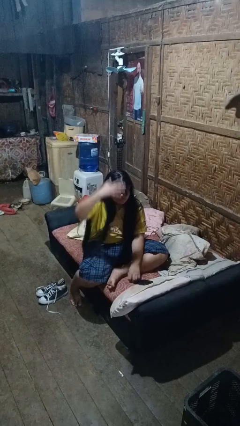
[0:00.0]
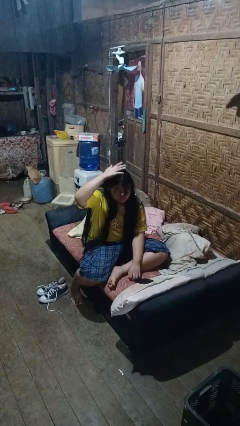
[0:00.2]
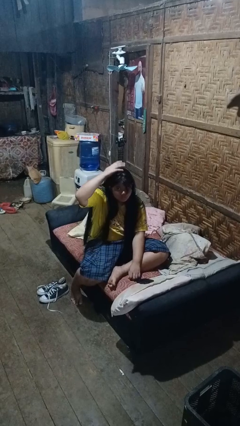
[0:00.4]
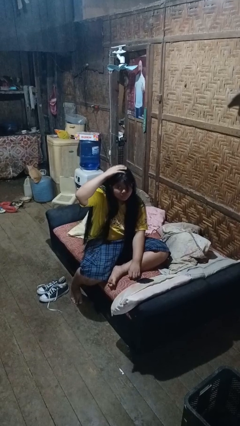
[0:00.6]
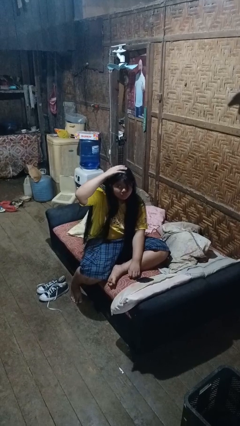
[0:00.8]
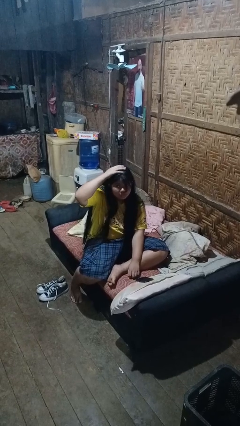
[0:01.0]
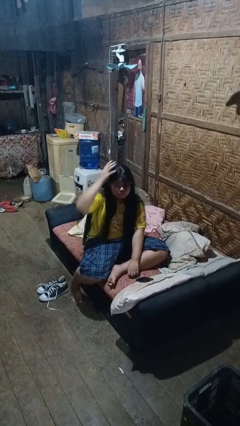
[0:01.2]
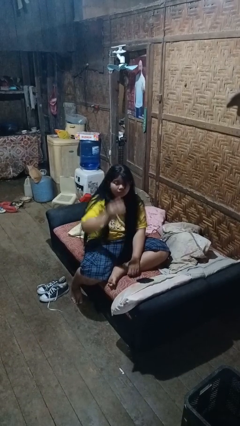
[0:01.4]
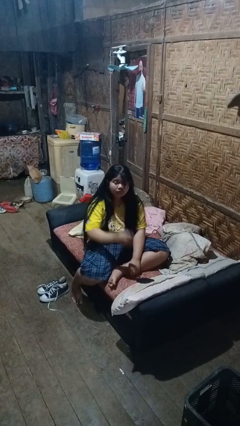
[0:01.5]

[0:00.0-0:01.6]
person pats head

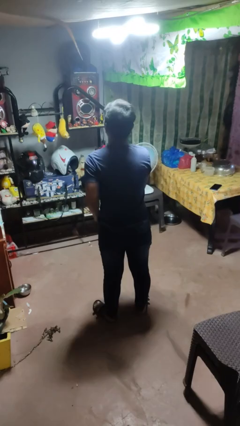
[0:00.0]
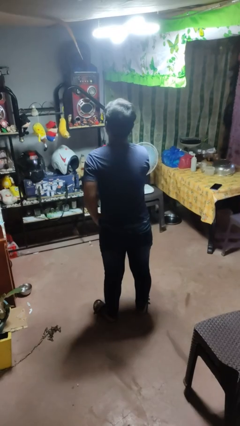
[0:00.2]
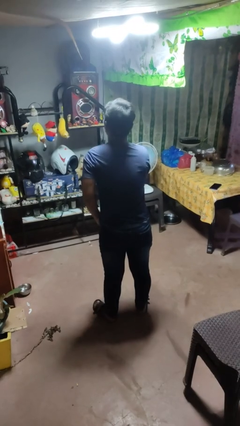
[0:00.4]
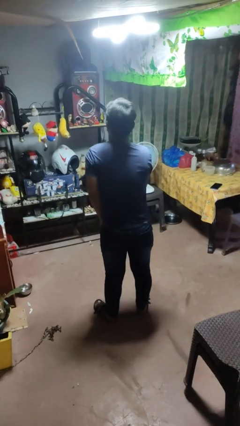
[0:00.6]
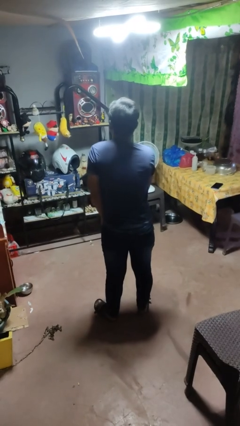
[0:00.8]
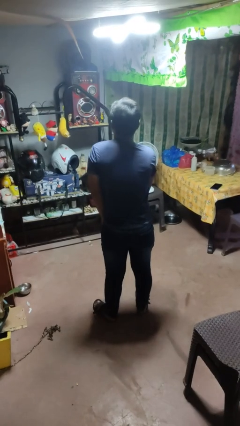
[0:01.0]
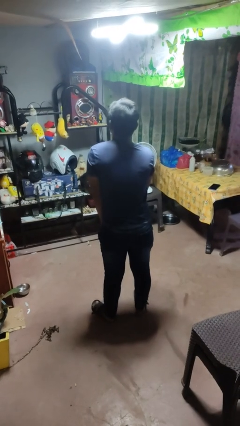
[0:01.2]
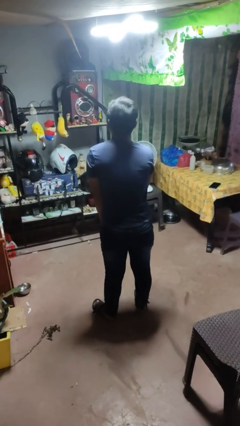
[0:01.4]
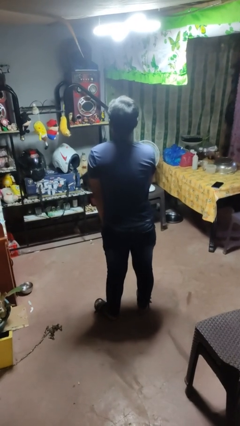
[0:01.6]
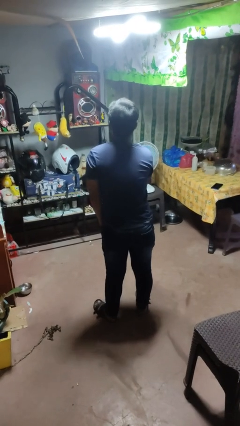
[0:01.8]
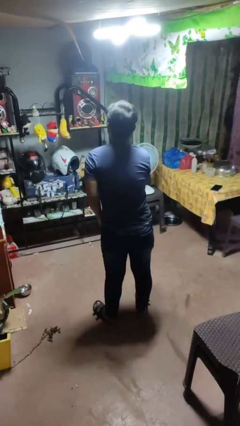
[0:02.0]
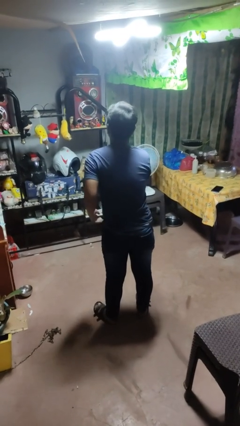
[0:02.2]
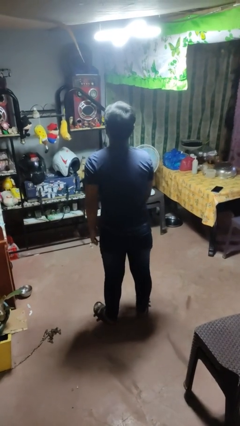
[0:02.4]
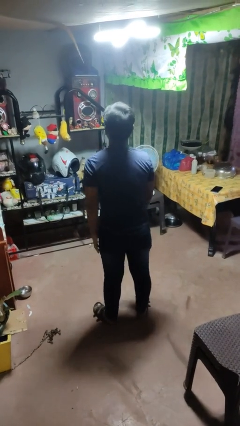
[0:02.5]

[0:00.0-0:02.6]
person puts hands in back pockets

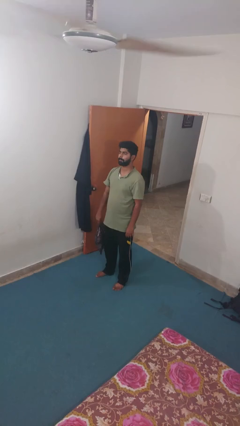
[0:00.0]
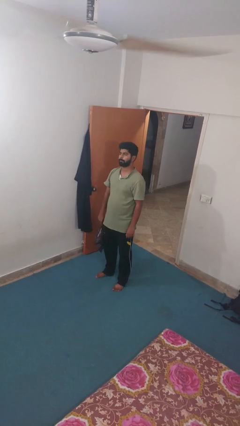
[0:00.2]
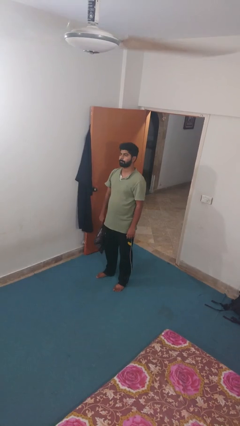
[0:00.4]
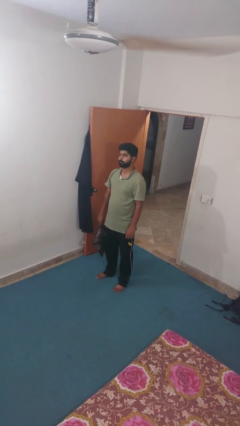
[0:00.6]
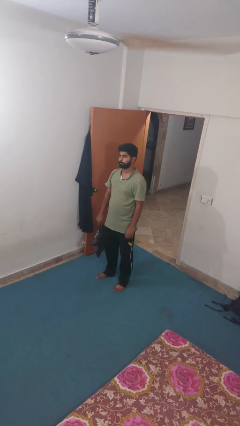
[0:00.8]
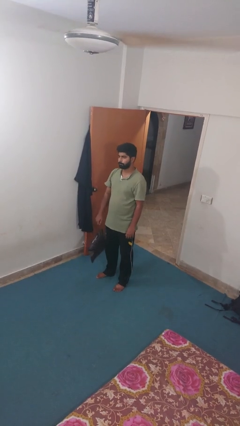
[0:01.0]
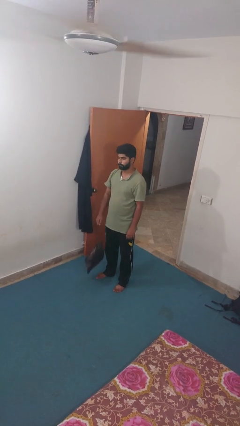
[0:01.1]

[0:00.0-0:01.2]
person drops object

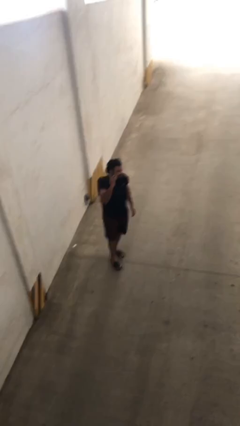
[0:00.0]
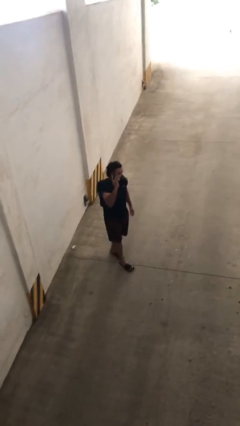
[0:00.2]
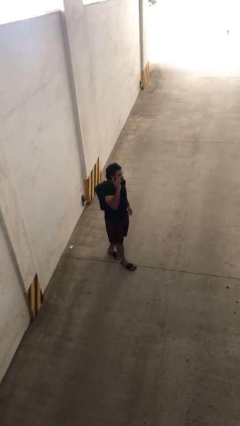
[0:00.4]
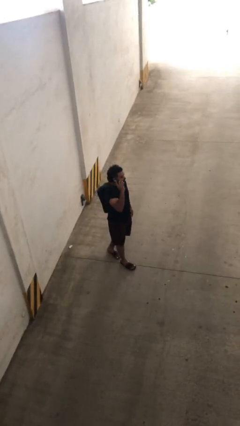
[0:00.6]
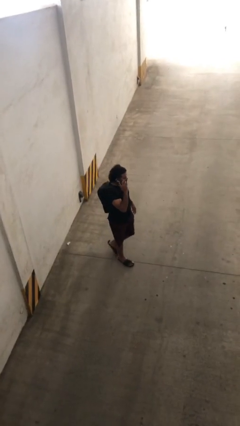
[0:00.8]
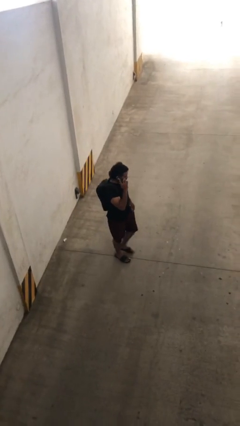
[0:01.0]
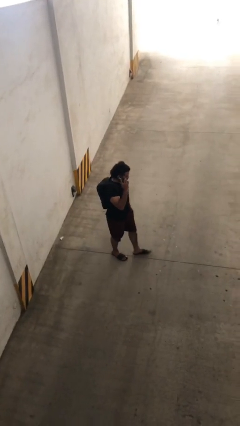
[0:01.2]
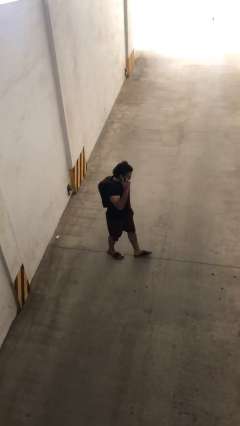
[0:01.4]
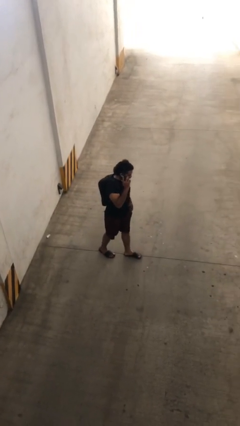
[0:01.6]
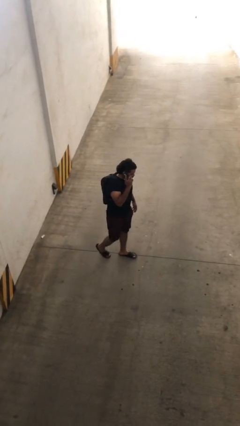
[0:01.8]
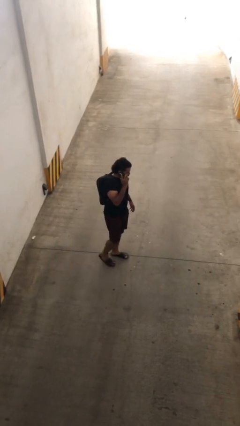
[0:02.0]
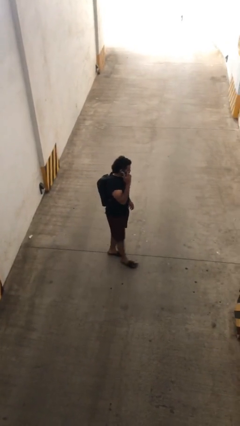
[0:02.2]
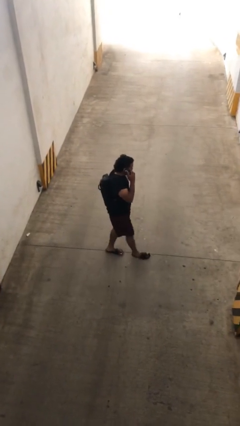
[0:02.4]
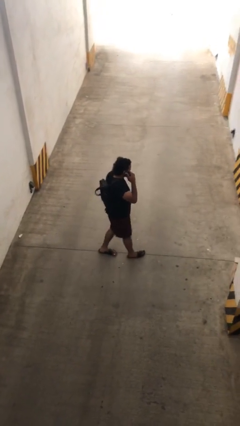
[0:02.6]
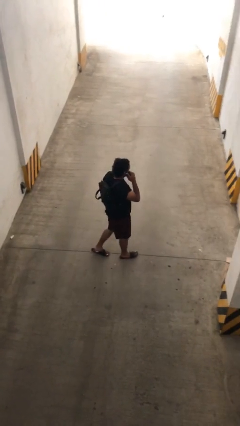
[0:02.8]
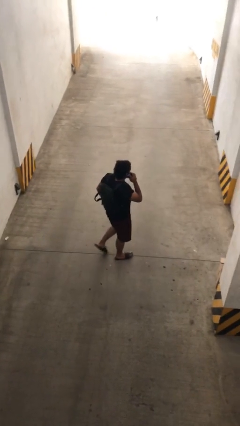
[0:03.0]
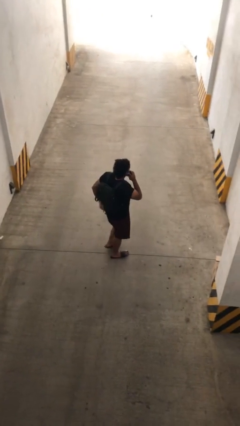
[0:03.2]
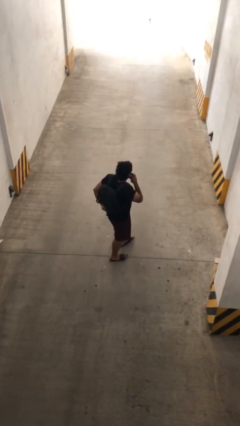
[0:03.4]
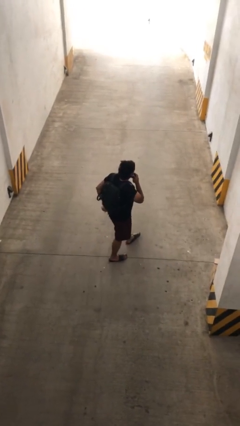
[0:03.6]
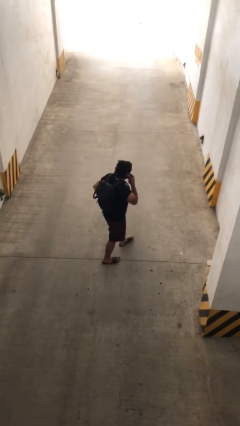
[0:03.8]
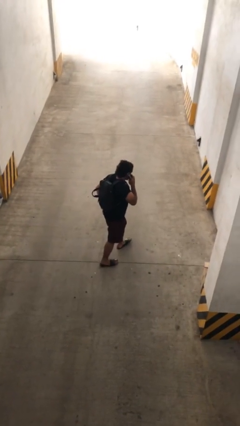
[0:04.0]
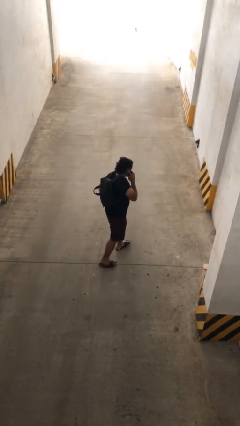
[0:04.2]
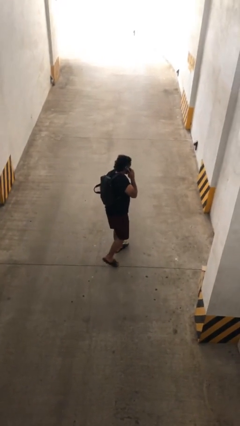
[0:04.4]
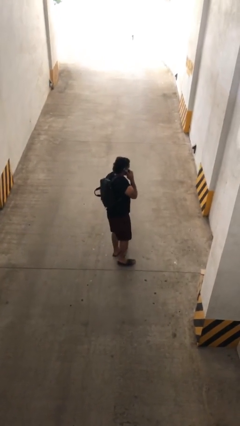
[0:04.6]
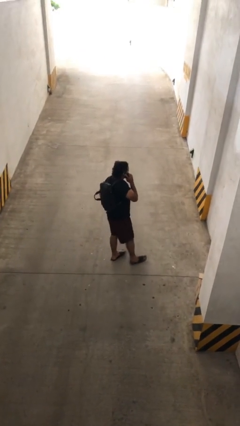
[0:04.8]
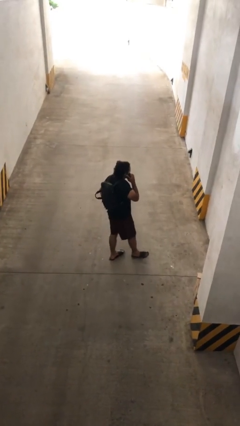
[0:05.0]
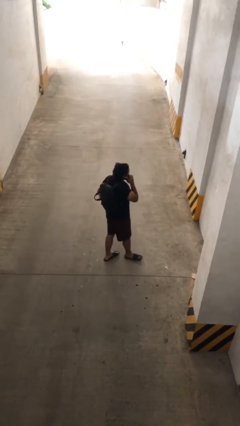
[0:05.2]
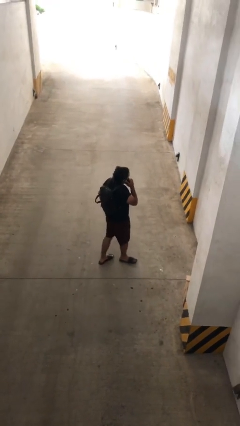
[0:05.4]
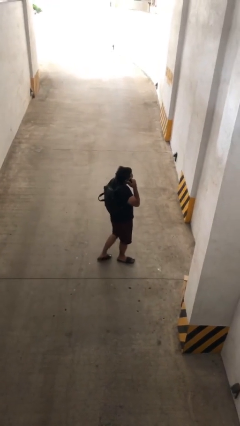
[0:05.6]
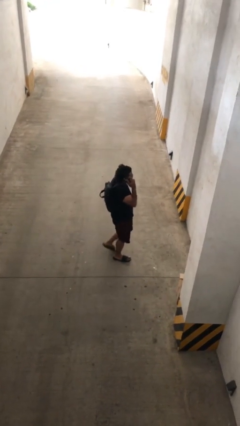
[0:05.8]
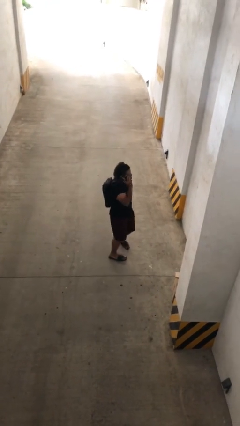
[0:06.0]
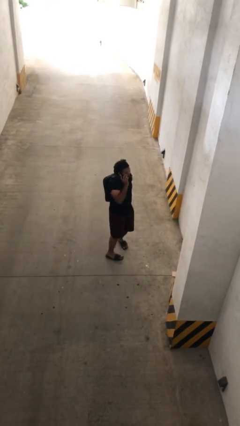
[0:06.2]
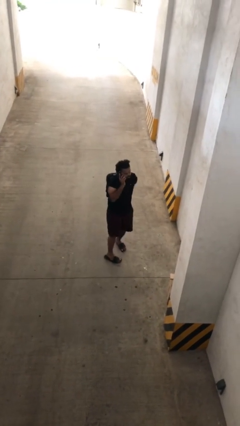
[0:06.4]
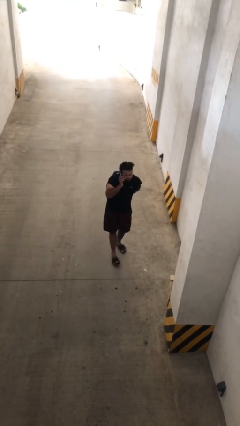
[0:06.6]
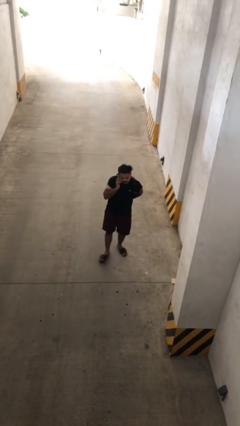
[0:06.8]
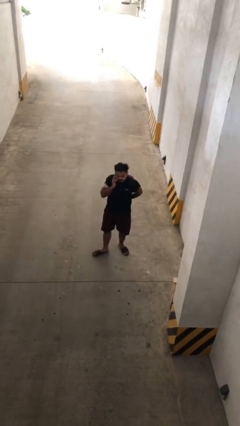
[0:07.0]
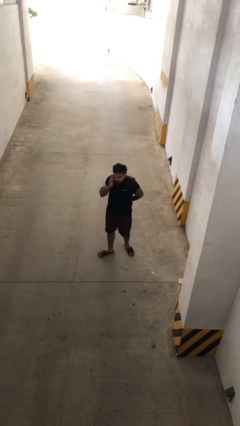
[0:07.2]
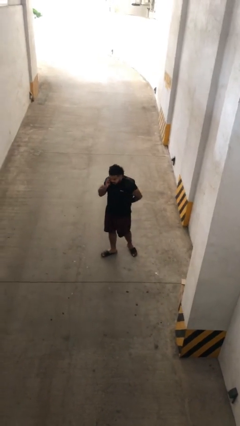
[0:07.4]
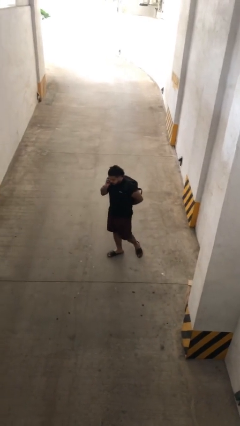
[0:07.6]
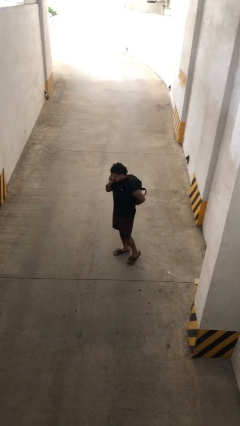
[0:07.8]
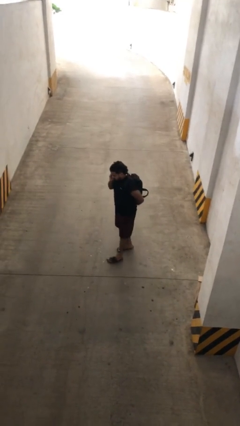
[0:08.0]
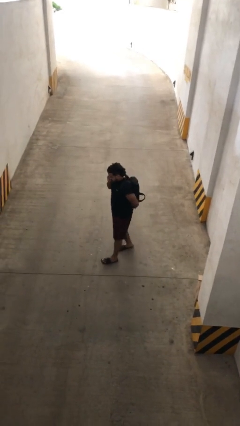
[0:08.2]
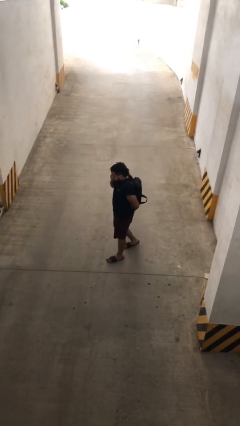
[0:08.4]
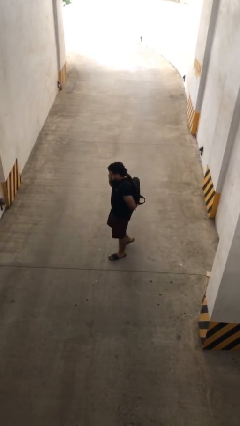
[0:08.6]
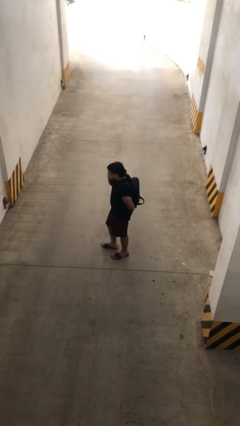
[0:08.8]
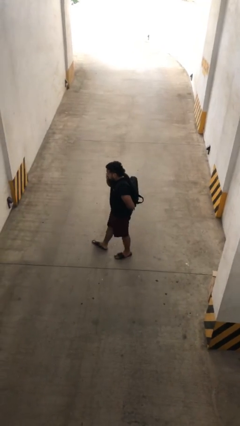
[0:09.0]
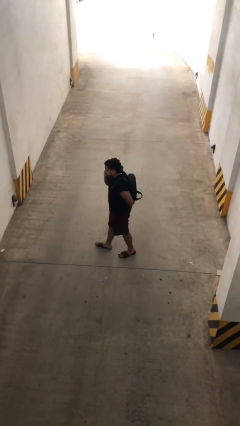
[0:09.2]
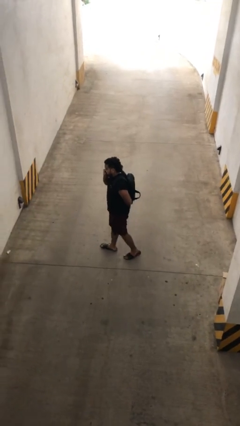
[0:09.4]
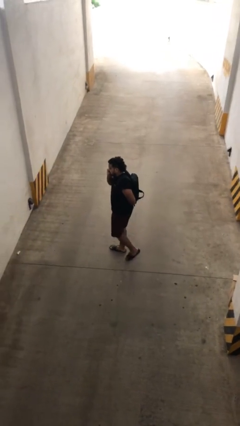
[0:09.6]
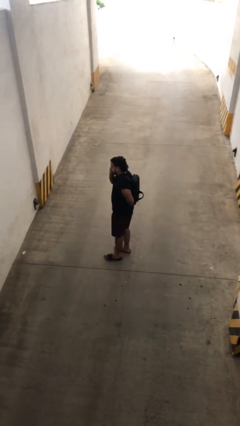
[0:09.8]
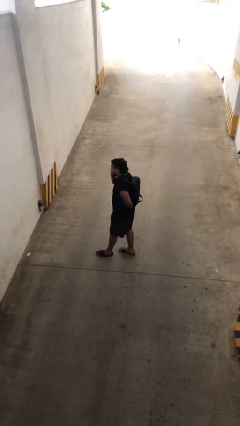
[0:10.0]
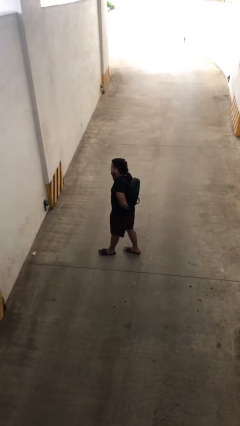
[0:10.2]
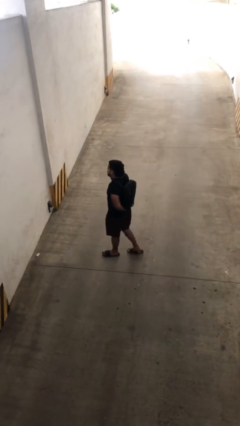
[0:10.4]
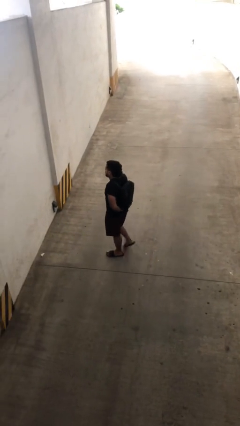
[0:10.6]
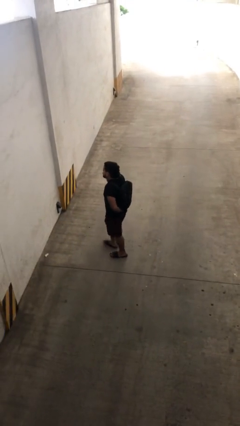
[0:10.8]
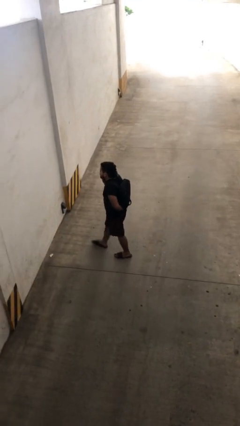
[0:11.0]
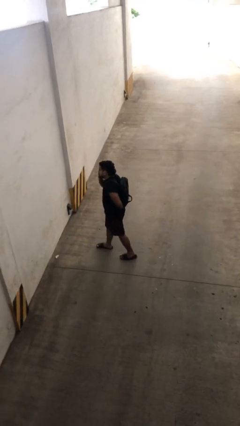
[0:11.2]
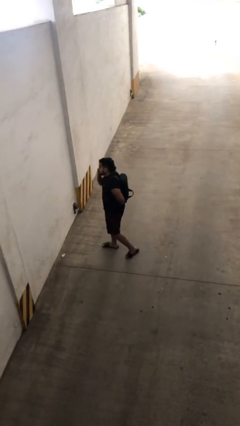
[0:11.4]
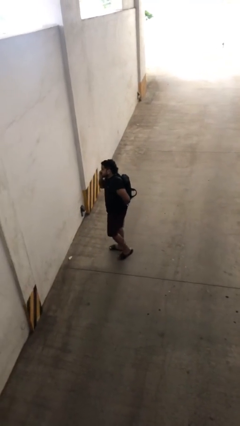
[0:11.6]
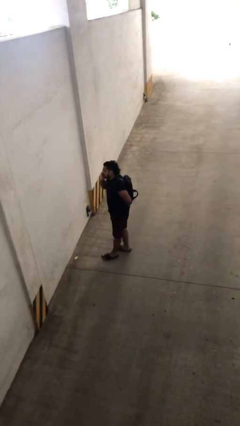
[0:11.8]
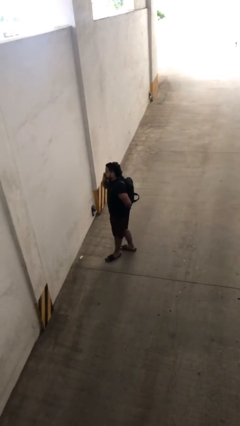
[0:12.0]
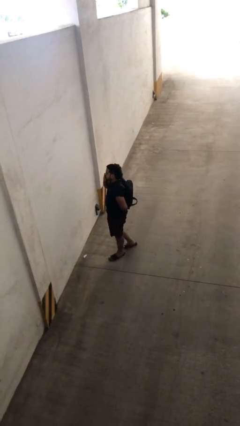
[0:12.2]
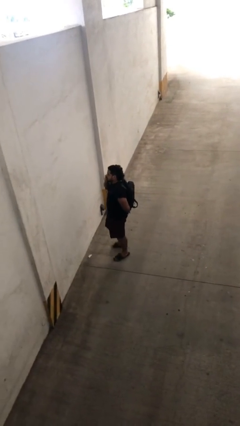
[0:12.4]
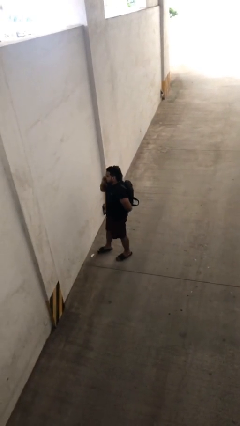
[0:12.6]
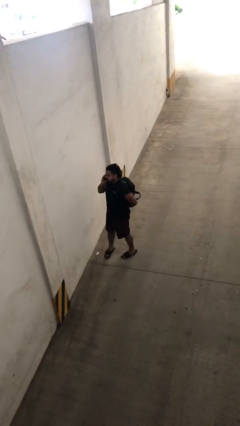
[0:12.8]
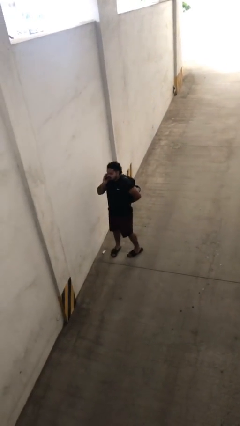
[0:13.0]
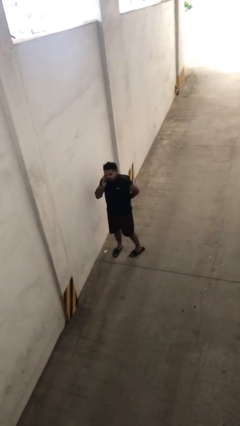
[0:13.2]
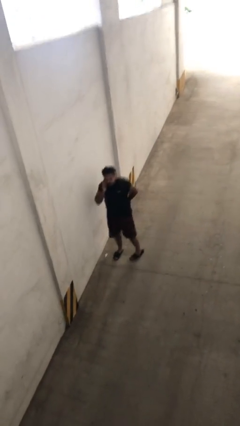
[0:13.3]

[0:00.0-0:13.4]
person talks on phone
